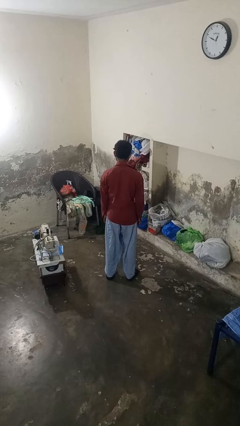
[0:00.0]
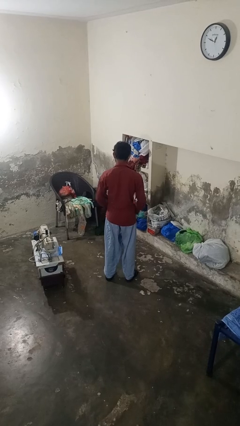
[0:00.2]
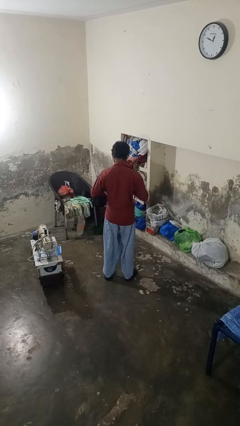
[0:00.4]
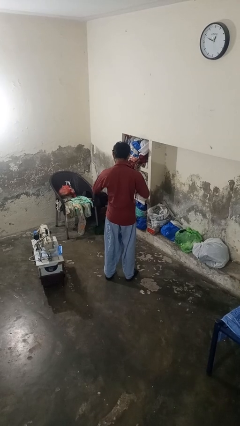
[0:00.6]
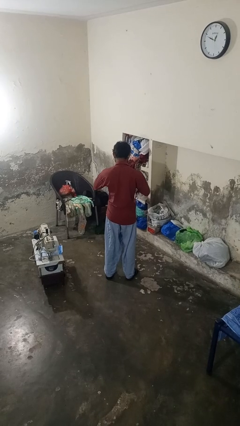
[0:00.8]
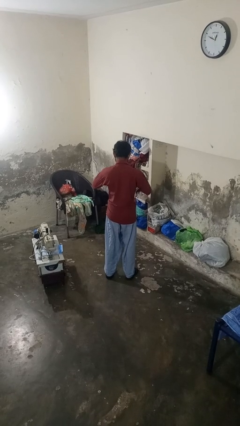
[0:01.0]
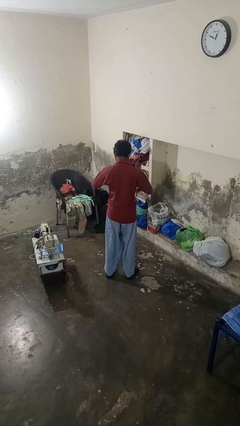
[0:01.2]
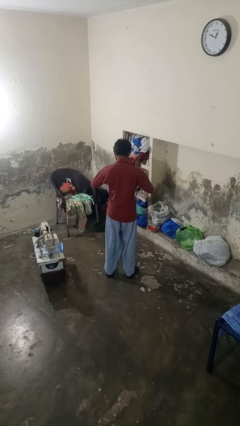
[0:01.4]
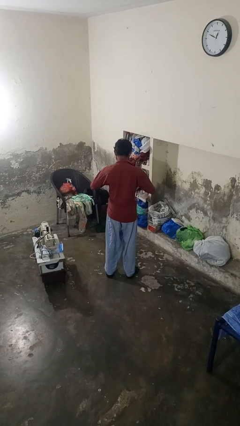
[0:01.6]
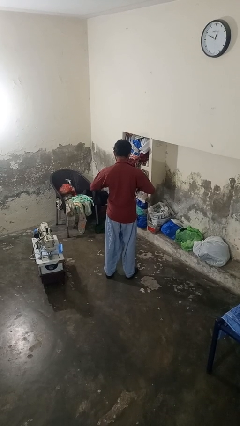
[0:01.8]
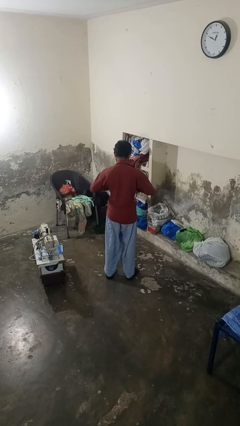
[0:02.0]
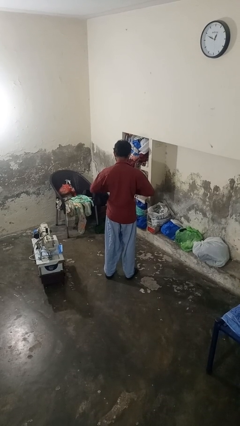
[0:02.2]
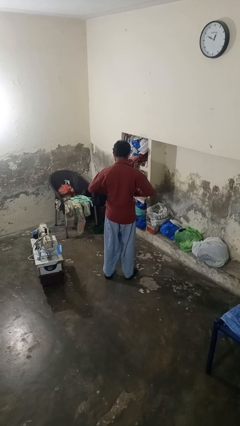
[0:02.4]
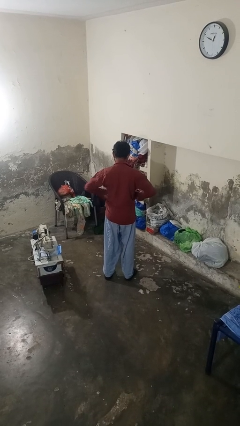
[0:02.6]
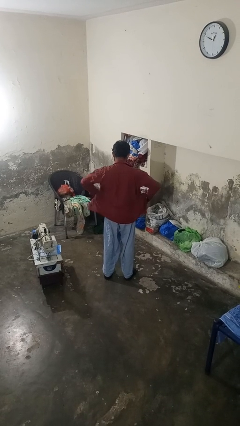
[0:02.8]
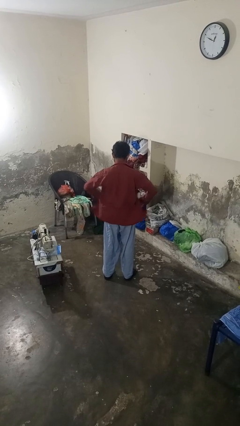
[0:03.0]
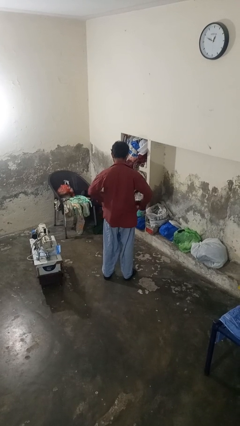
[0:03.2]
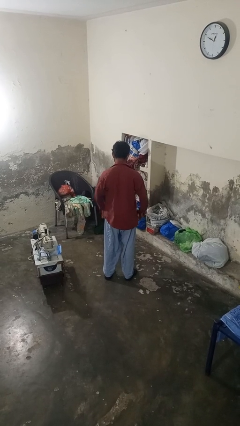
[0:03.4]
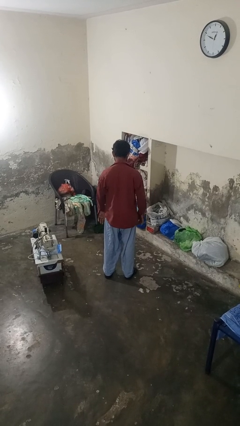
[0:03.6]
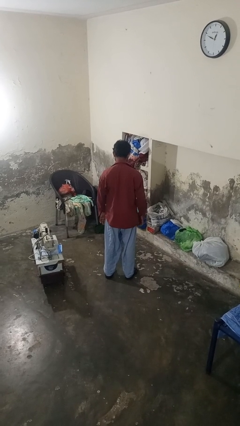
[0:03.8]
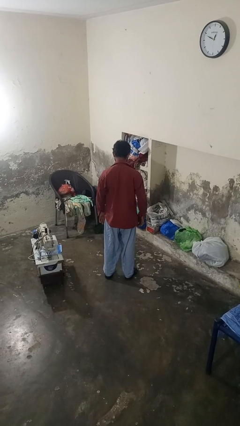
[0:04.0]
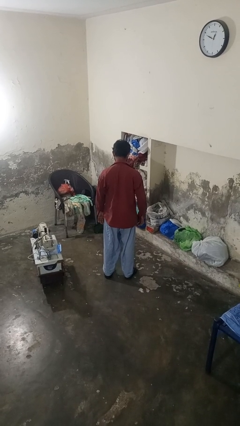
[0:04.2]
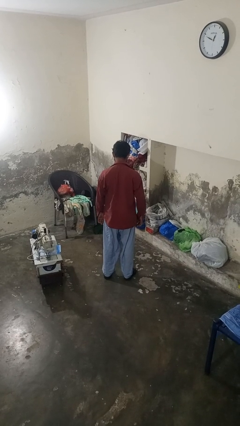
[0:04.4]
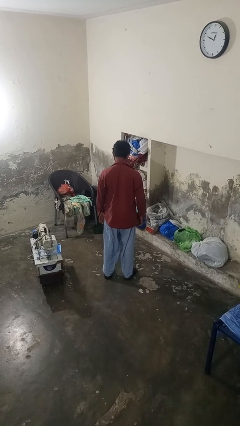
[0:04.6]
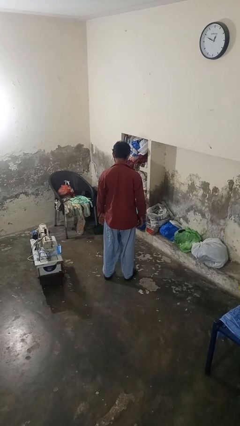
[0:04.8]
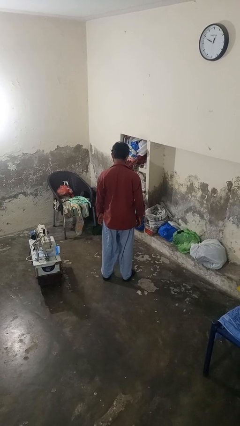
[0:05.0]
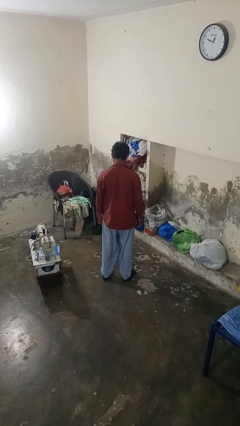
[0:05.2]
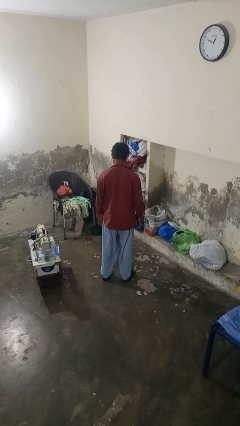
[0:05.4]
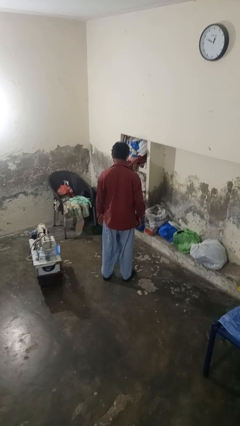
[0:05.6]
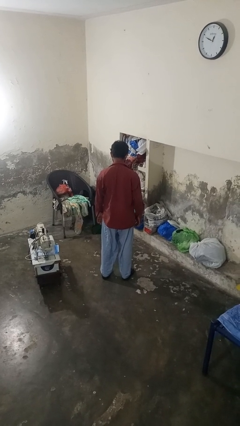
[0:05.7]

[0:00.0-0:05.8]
person unbuttons shirt

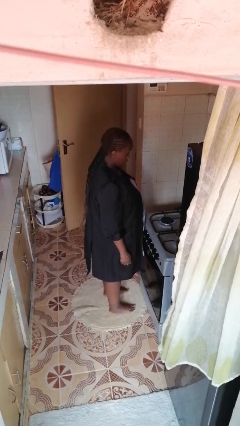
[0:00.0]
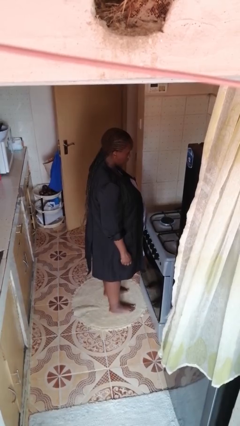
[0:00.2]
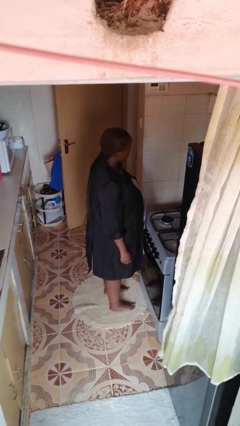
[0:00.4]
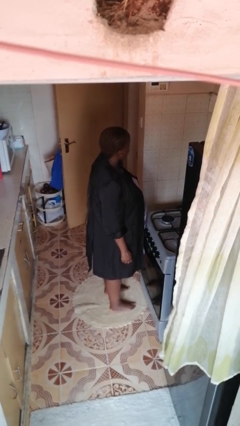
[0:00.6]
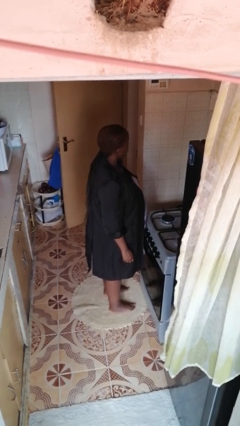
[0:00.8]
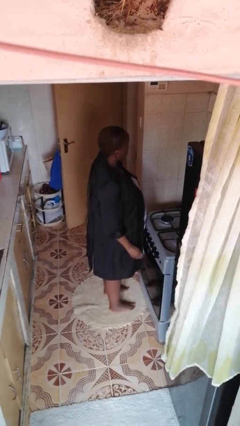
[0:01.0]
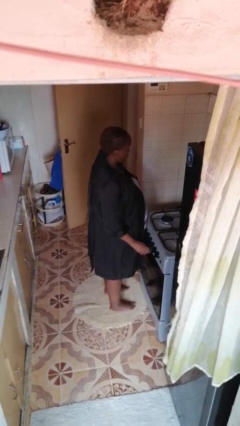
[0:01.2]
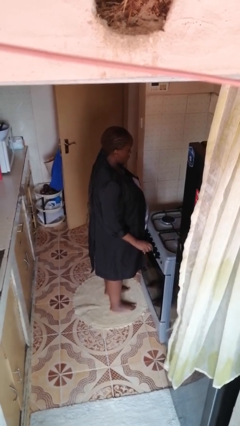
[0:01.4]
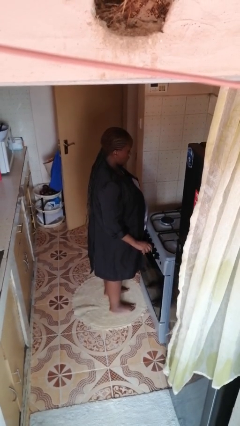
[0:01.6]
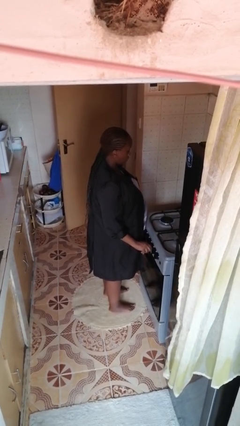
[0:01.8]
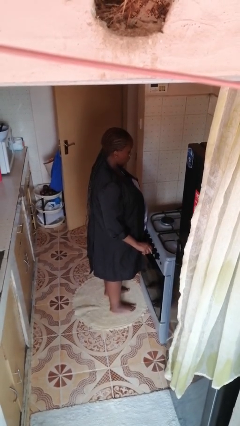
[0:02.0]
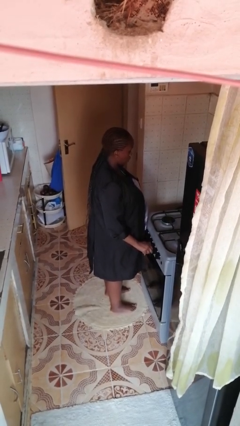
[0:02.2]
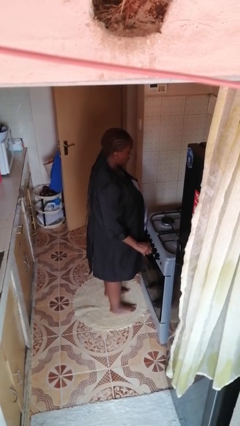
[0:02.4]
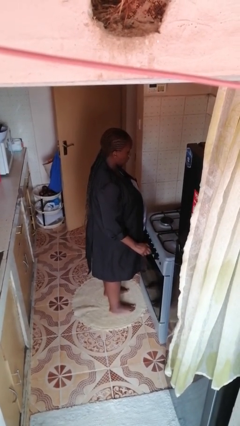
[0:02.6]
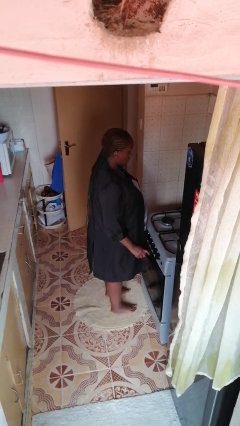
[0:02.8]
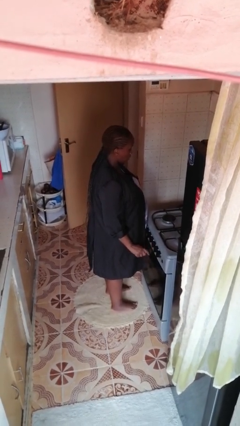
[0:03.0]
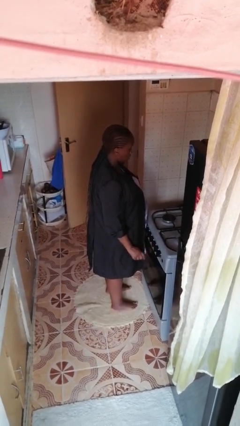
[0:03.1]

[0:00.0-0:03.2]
person turns off stovetop

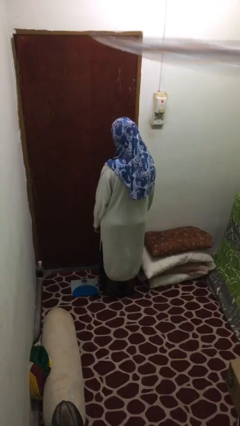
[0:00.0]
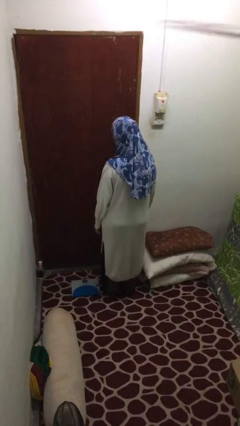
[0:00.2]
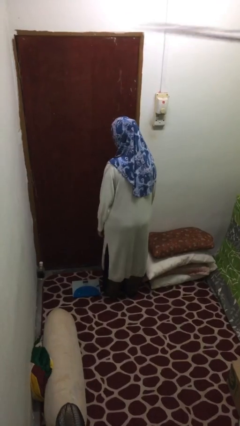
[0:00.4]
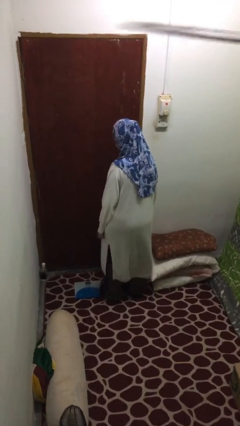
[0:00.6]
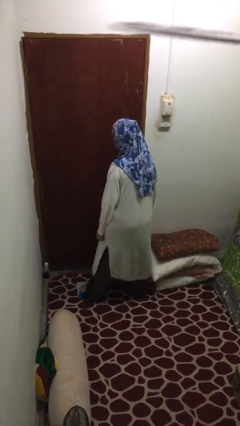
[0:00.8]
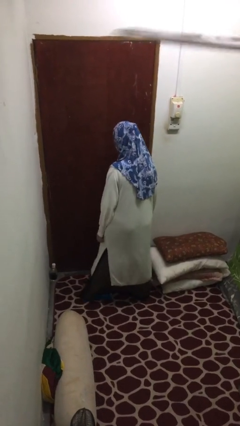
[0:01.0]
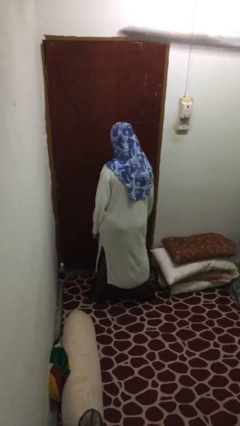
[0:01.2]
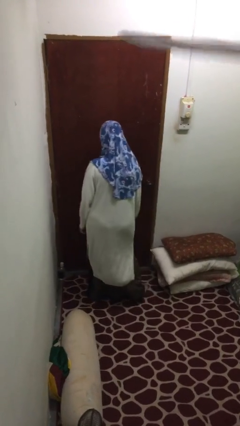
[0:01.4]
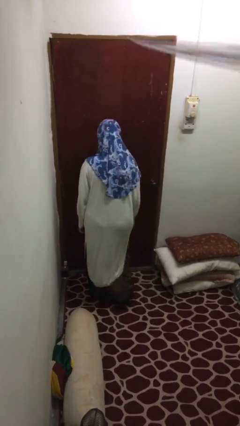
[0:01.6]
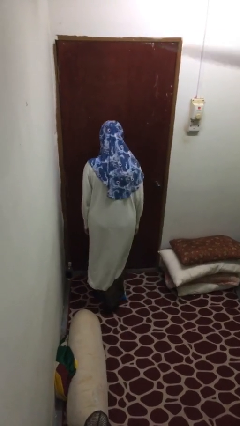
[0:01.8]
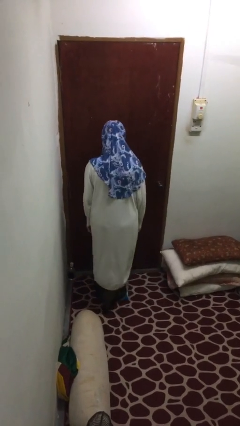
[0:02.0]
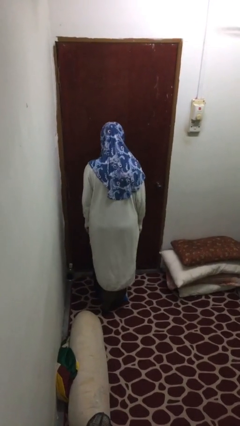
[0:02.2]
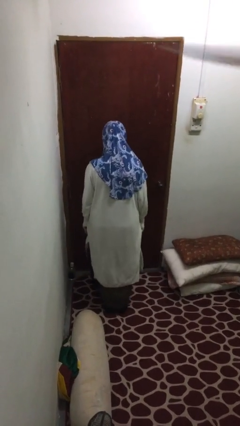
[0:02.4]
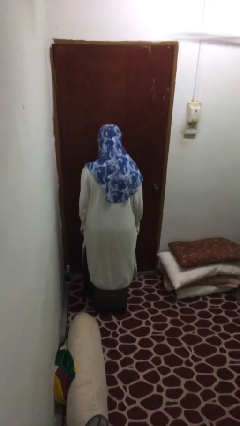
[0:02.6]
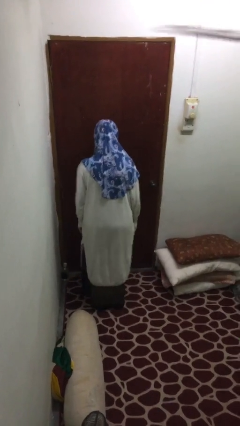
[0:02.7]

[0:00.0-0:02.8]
person uses bodyweight scale

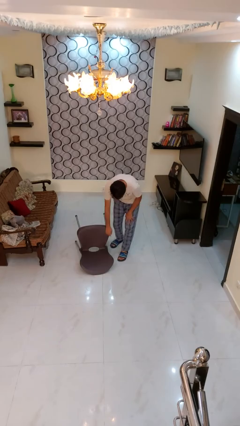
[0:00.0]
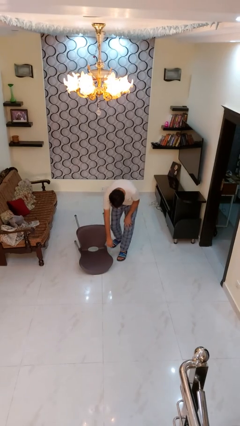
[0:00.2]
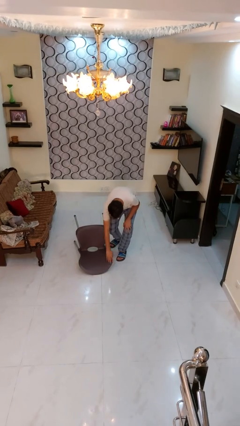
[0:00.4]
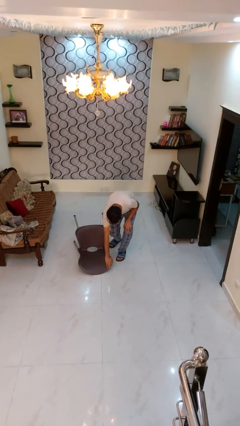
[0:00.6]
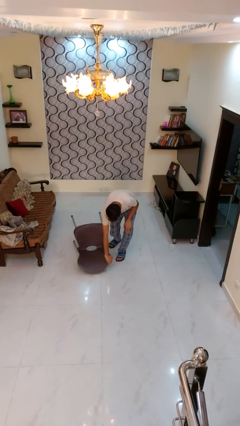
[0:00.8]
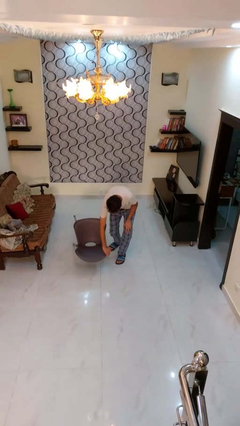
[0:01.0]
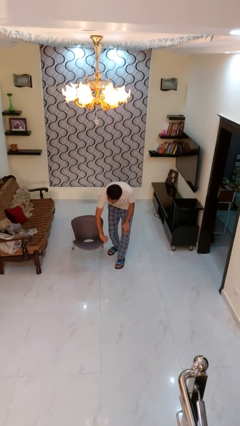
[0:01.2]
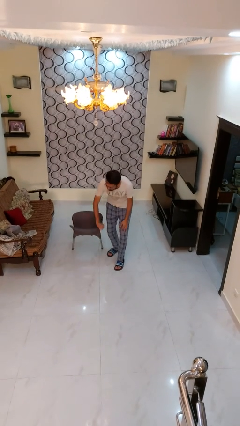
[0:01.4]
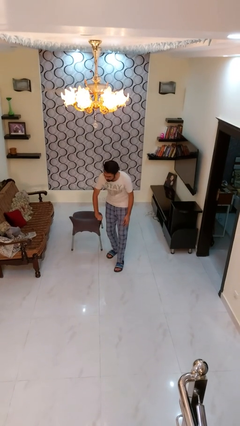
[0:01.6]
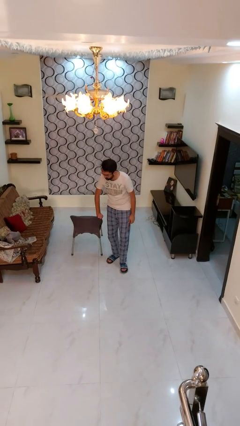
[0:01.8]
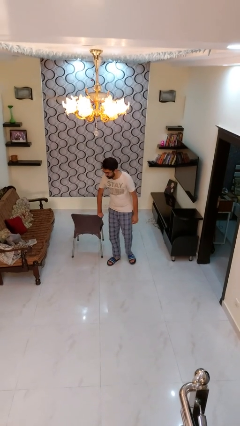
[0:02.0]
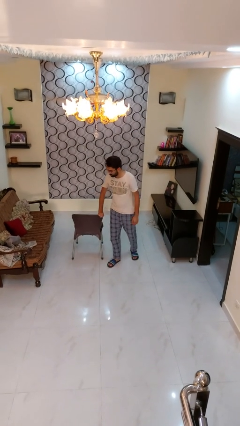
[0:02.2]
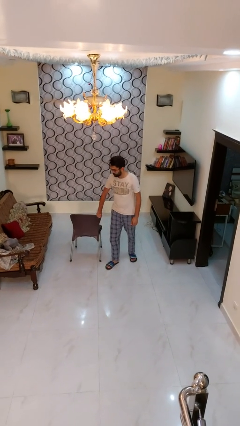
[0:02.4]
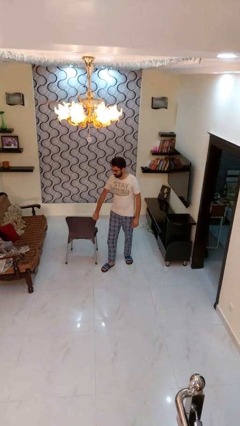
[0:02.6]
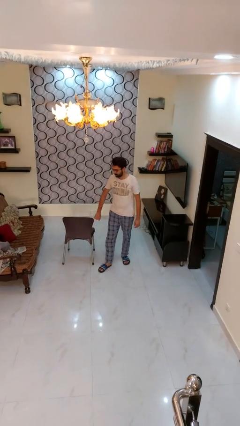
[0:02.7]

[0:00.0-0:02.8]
person sets upright furniture

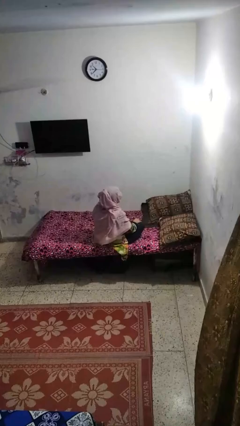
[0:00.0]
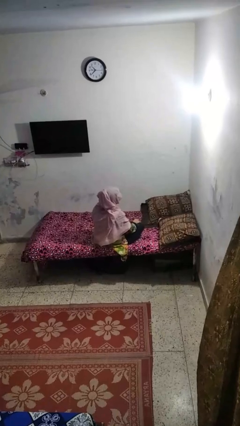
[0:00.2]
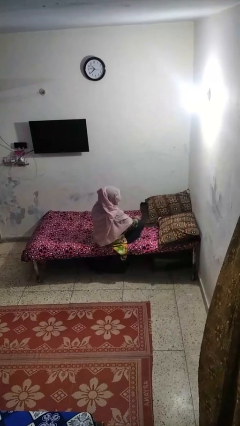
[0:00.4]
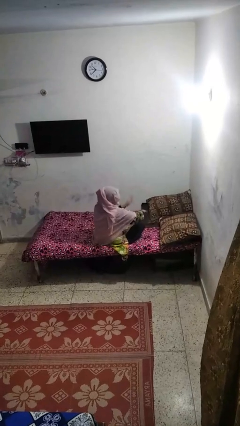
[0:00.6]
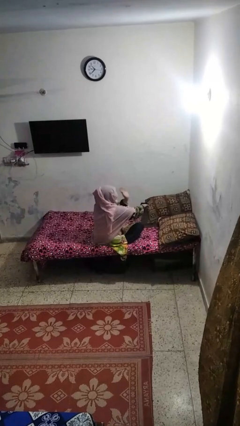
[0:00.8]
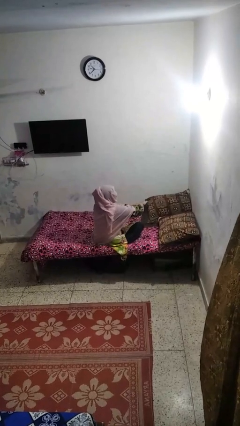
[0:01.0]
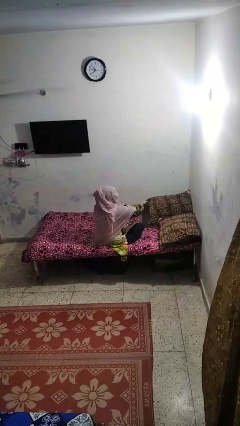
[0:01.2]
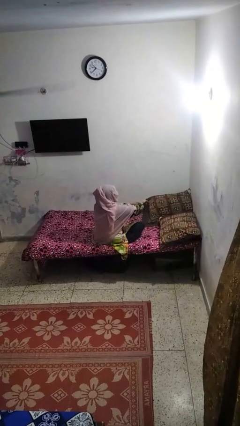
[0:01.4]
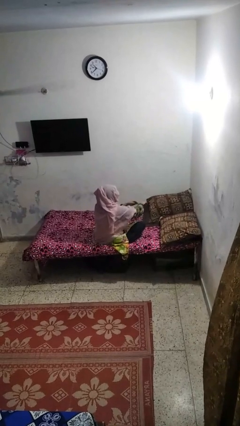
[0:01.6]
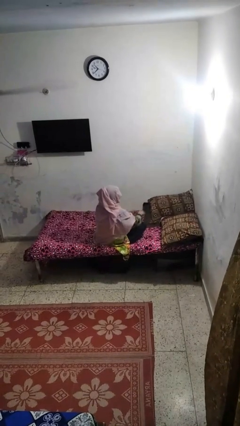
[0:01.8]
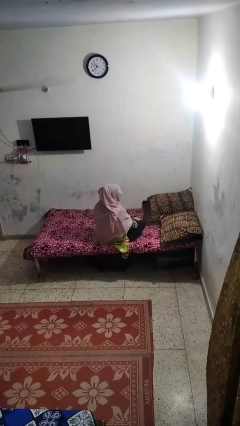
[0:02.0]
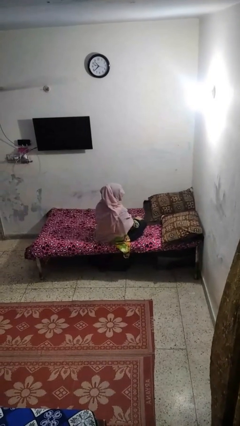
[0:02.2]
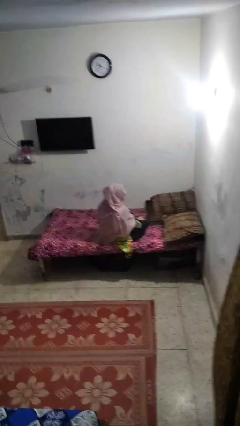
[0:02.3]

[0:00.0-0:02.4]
person swats bug

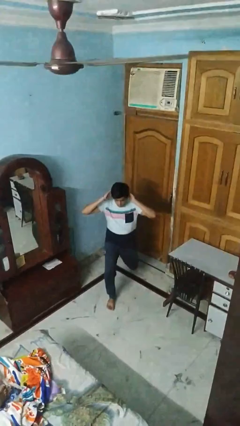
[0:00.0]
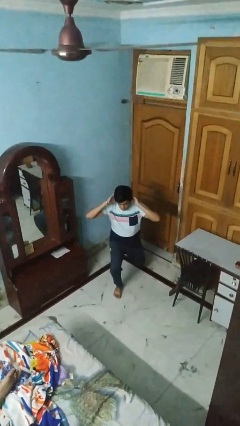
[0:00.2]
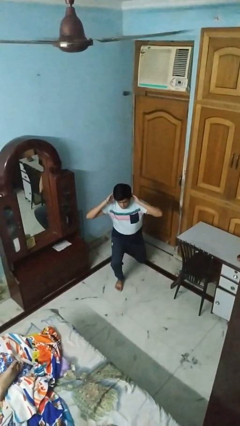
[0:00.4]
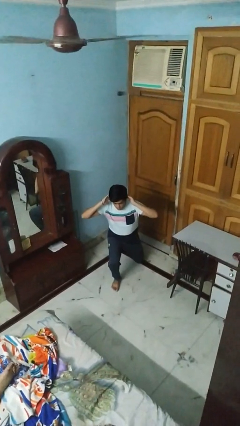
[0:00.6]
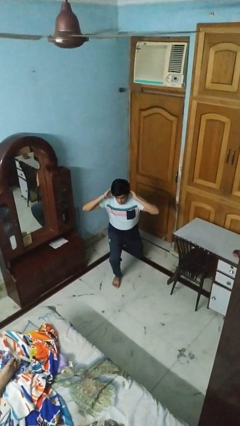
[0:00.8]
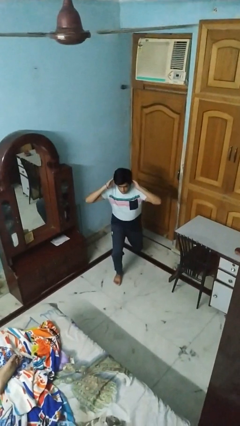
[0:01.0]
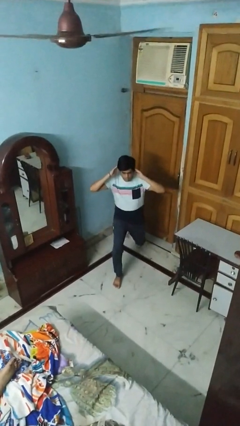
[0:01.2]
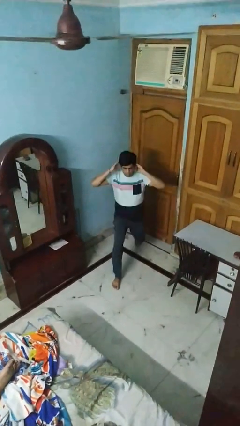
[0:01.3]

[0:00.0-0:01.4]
person exercises with lunges
